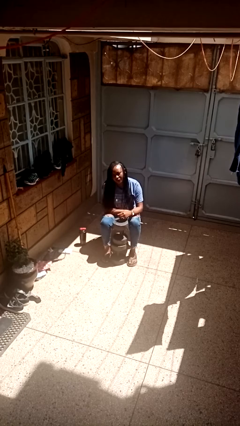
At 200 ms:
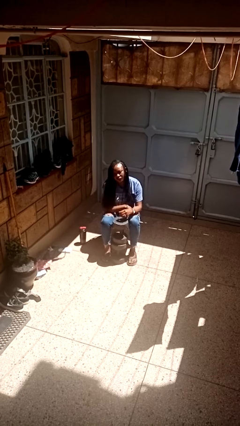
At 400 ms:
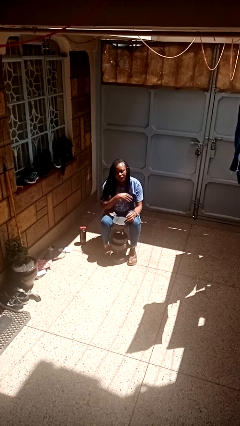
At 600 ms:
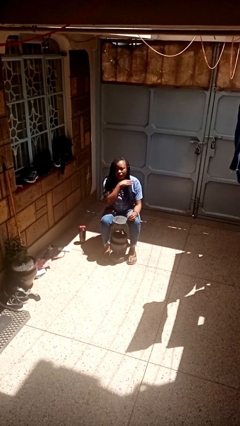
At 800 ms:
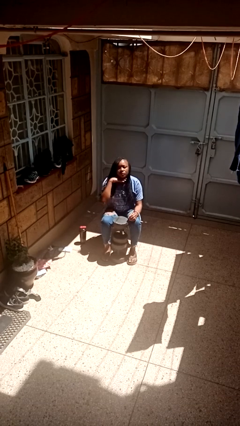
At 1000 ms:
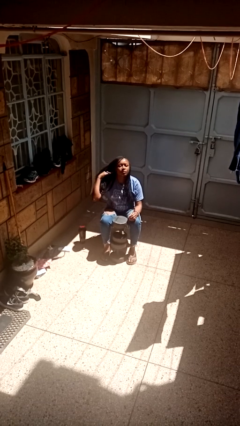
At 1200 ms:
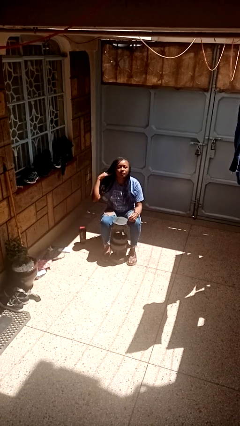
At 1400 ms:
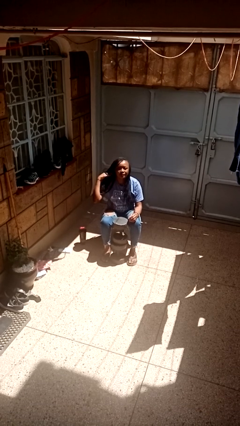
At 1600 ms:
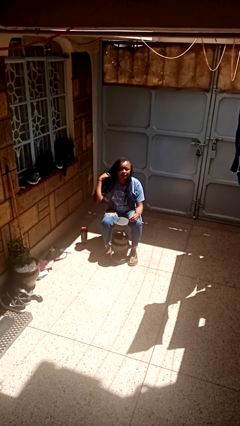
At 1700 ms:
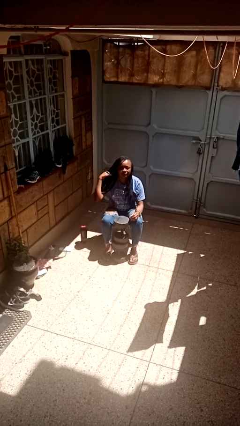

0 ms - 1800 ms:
person gestures cut

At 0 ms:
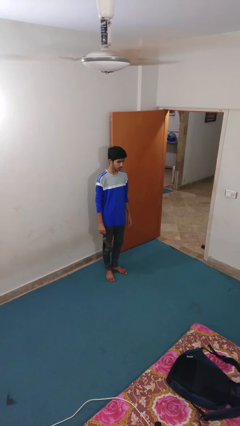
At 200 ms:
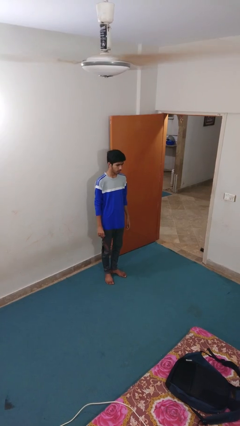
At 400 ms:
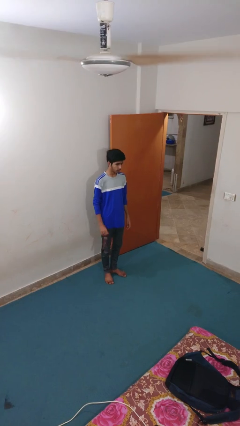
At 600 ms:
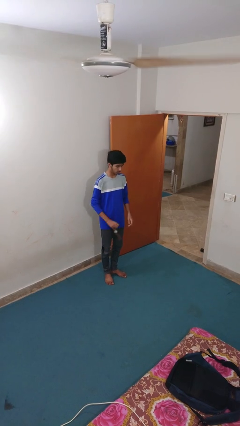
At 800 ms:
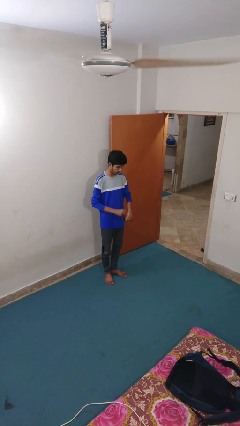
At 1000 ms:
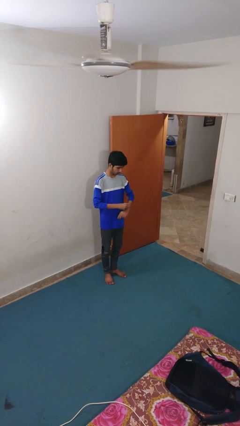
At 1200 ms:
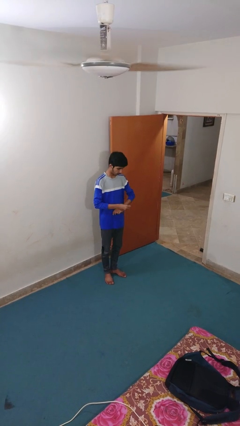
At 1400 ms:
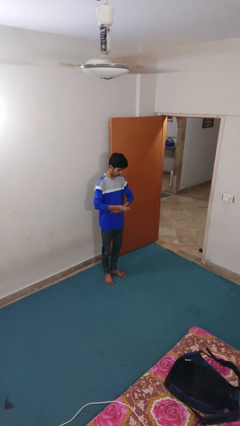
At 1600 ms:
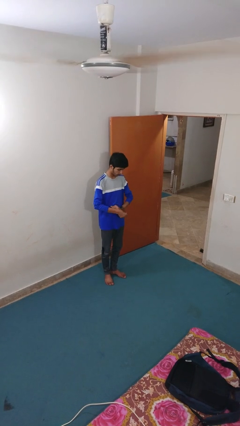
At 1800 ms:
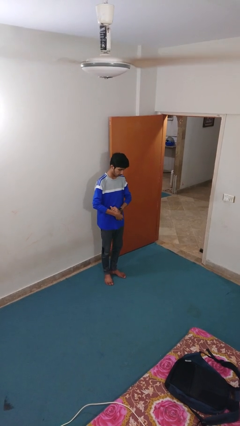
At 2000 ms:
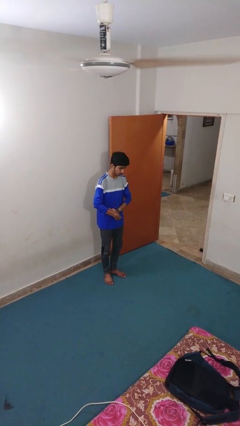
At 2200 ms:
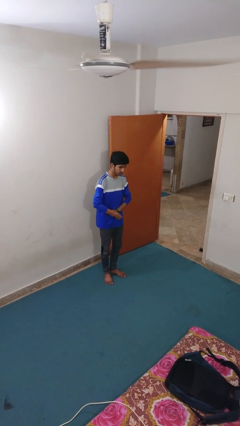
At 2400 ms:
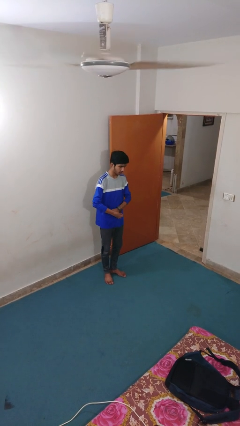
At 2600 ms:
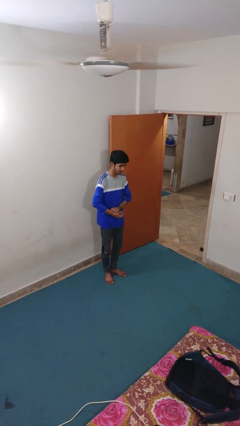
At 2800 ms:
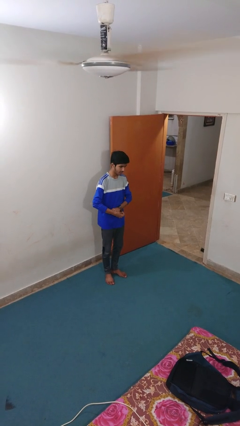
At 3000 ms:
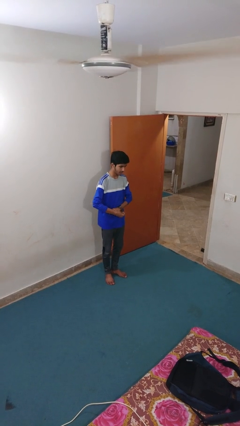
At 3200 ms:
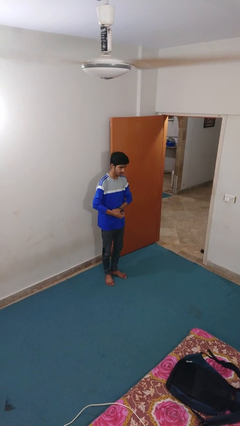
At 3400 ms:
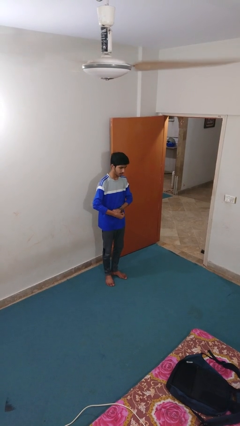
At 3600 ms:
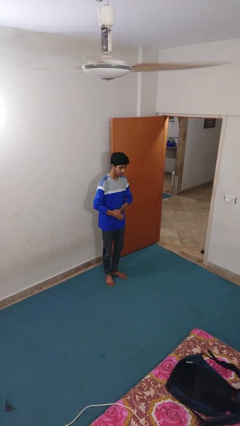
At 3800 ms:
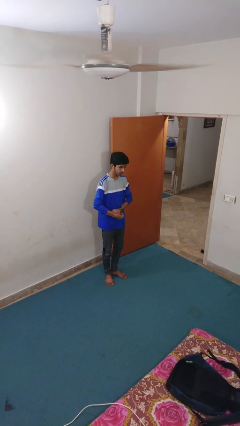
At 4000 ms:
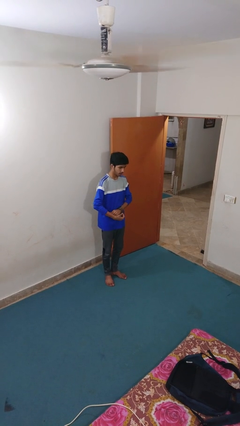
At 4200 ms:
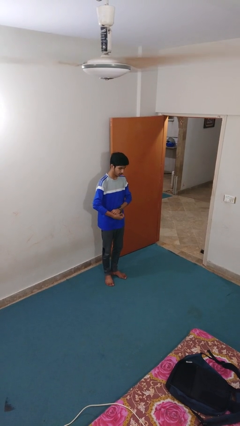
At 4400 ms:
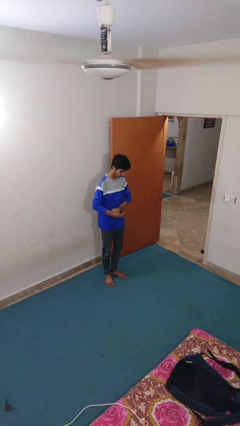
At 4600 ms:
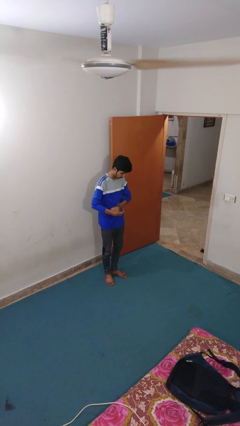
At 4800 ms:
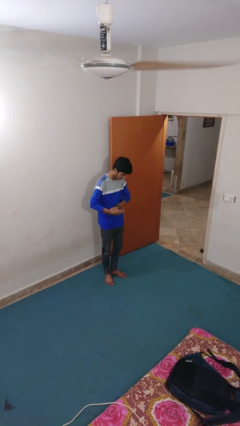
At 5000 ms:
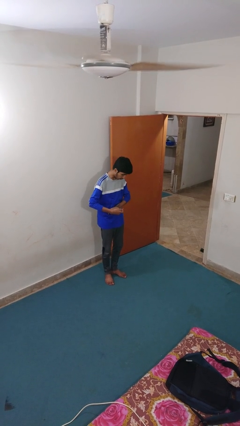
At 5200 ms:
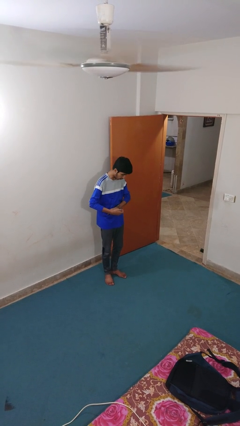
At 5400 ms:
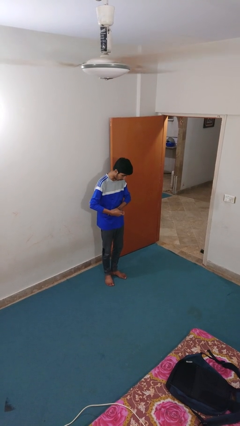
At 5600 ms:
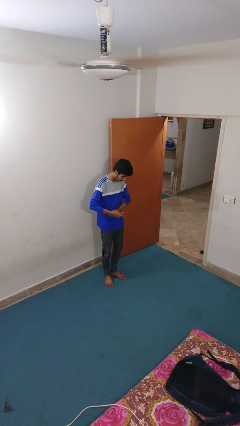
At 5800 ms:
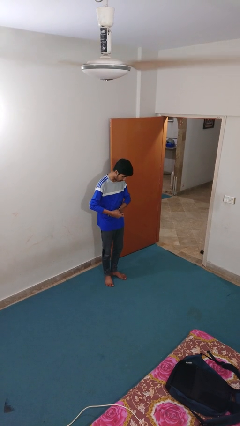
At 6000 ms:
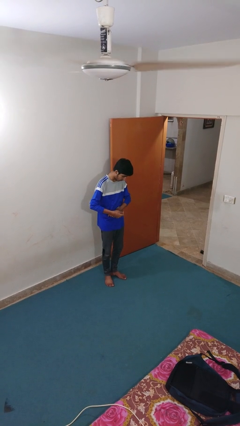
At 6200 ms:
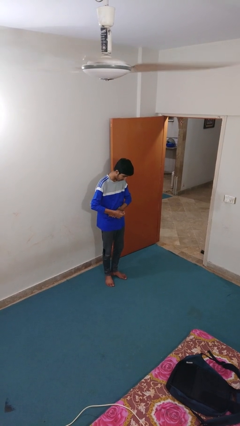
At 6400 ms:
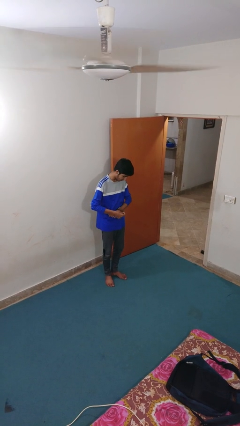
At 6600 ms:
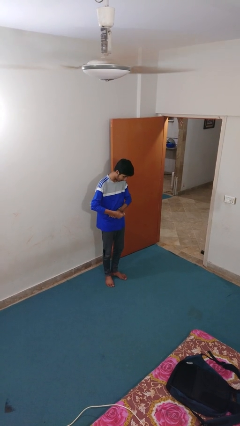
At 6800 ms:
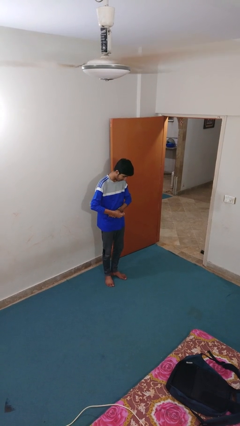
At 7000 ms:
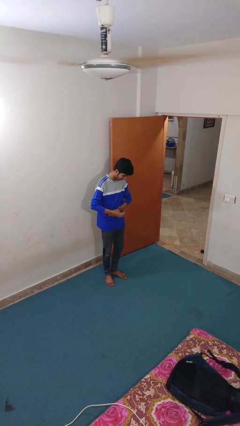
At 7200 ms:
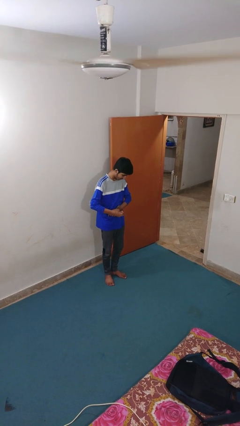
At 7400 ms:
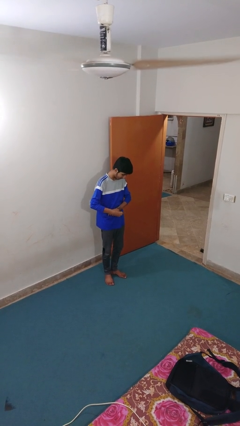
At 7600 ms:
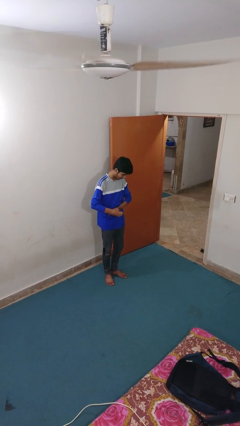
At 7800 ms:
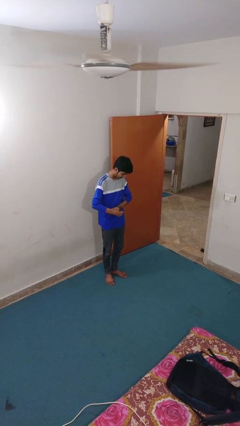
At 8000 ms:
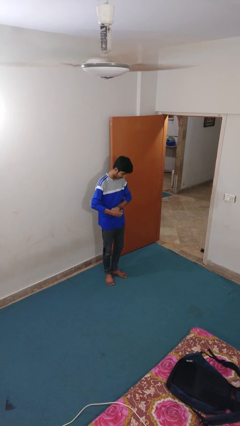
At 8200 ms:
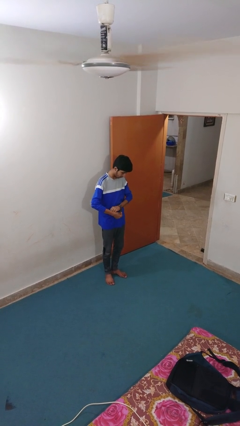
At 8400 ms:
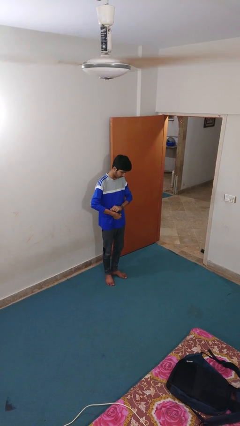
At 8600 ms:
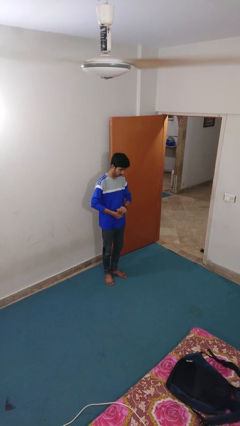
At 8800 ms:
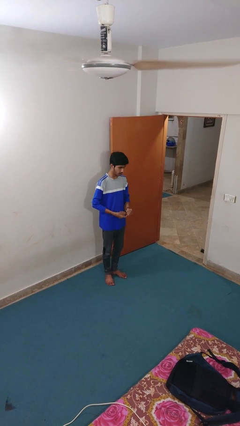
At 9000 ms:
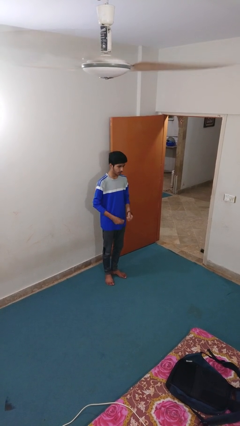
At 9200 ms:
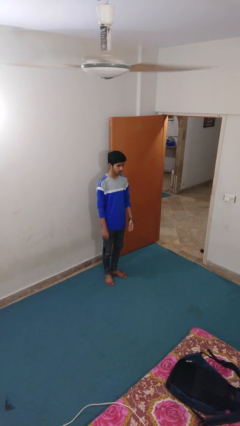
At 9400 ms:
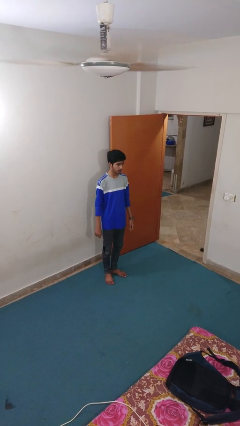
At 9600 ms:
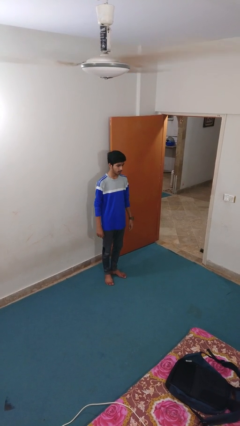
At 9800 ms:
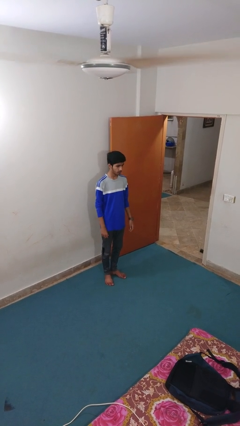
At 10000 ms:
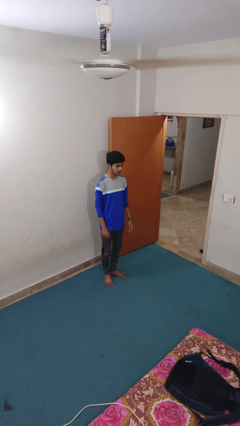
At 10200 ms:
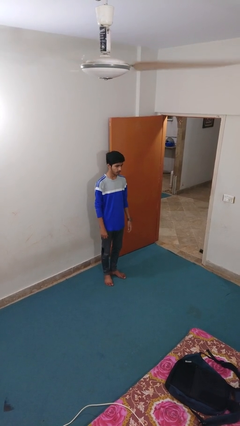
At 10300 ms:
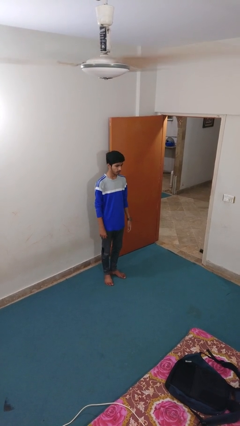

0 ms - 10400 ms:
person puts on wristwatch

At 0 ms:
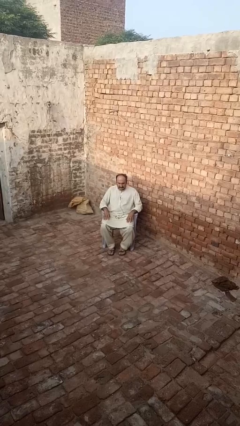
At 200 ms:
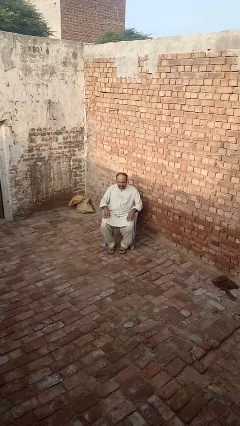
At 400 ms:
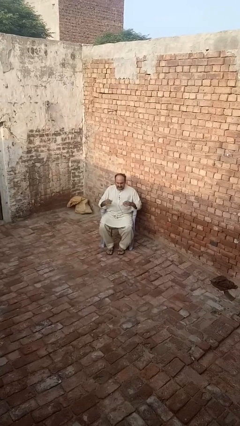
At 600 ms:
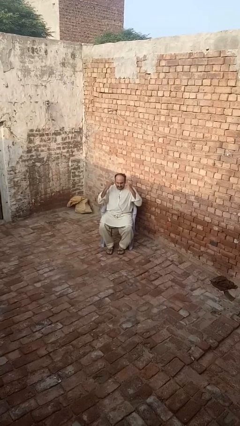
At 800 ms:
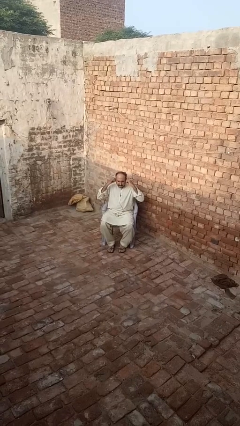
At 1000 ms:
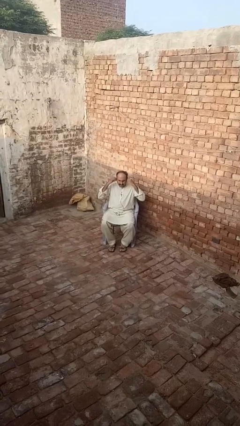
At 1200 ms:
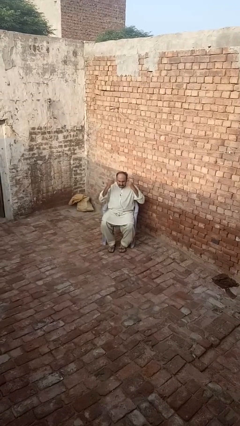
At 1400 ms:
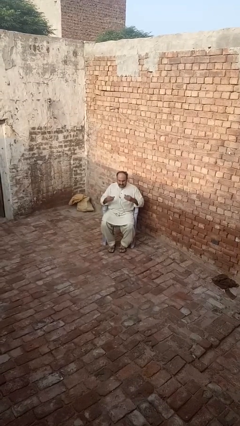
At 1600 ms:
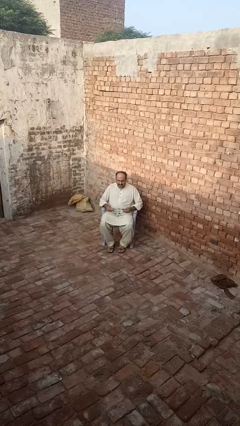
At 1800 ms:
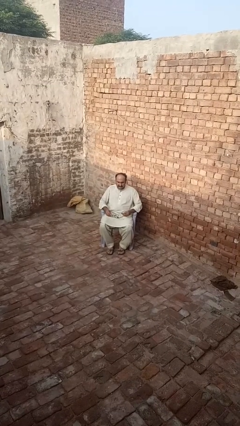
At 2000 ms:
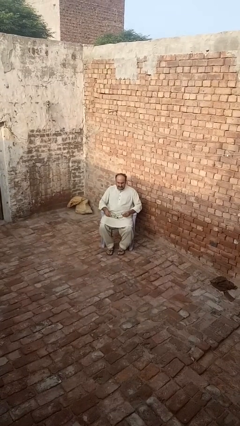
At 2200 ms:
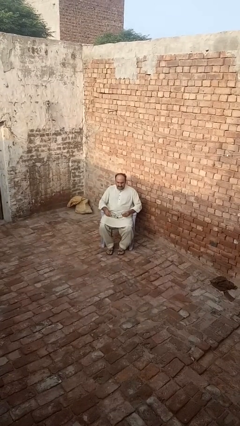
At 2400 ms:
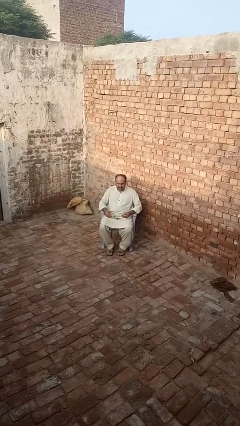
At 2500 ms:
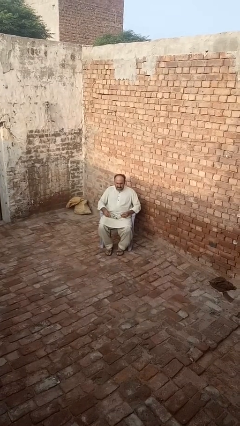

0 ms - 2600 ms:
person takes off headphones

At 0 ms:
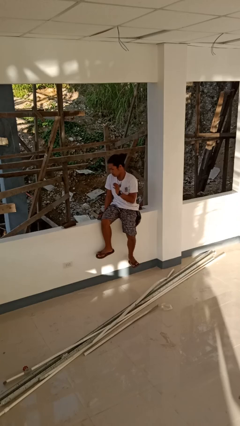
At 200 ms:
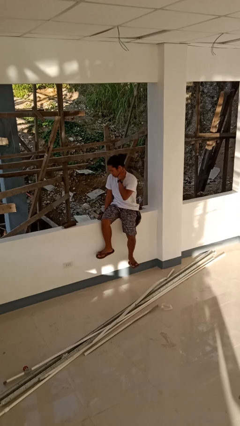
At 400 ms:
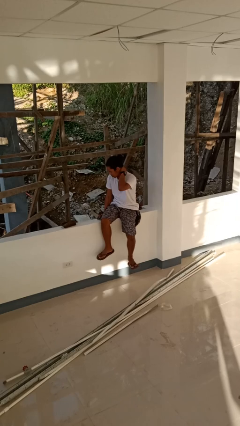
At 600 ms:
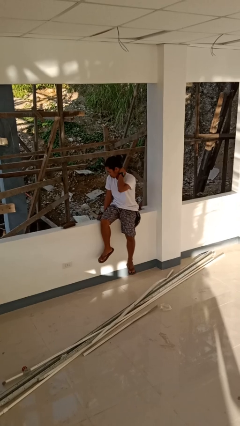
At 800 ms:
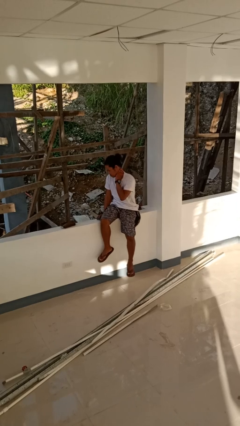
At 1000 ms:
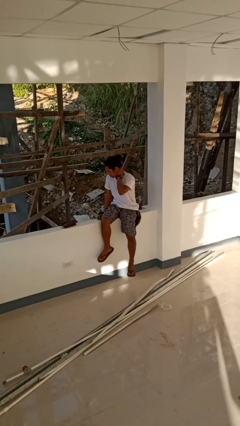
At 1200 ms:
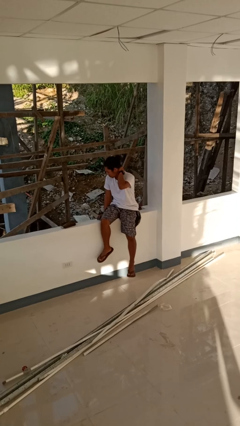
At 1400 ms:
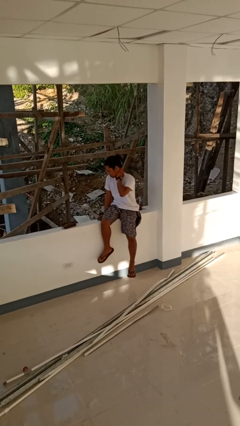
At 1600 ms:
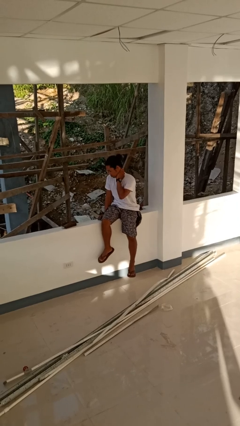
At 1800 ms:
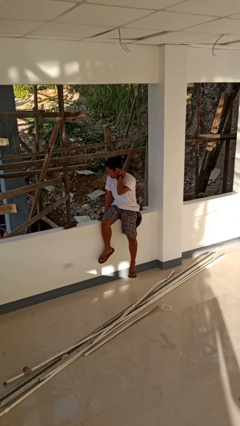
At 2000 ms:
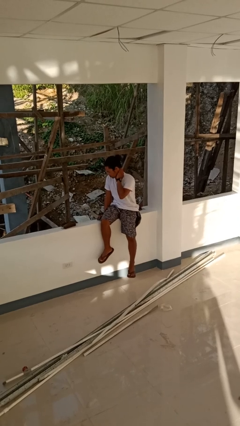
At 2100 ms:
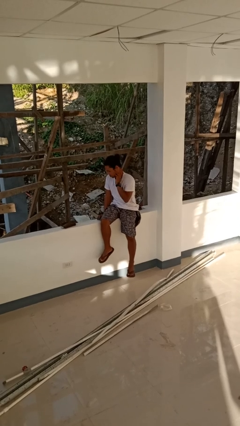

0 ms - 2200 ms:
person rubs neck

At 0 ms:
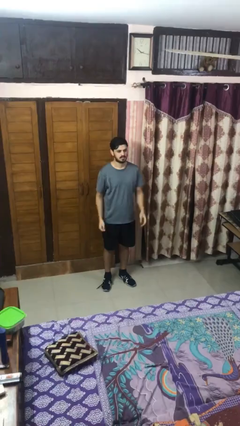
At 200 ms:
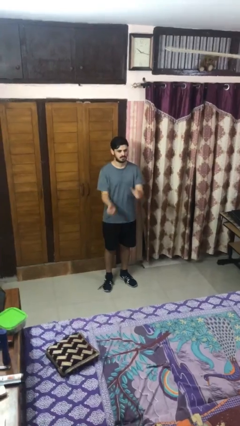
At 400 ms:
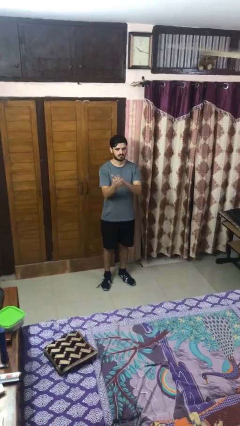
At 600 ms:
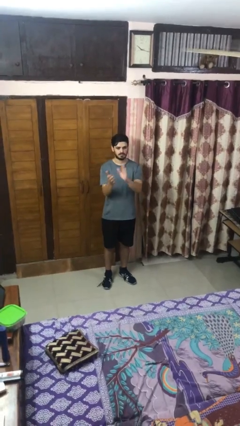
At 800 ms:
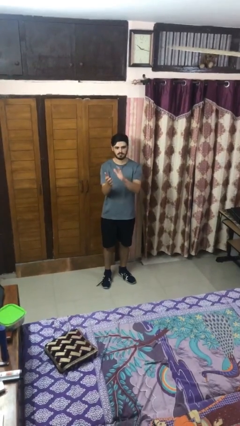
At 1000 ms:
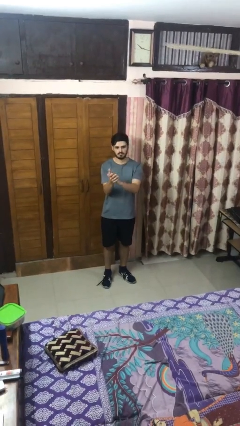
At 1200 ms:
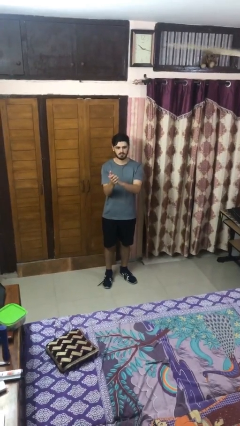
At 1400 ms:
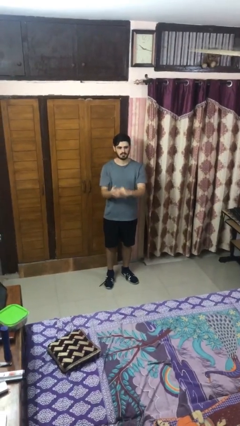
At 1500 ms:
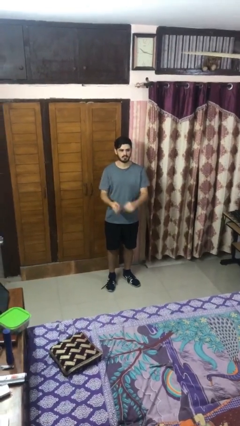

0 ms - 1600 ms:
person claps hands
